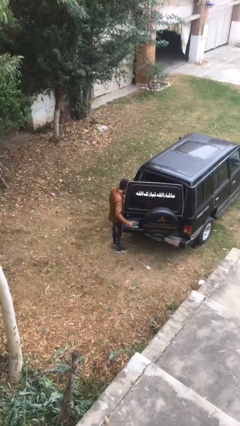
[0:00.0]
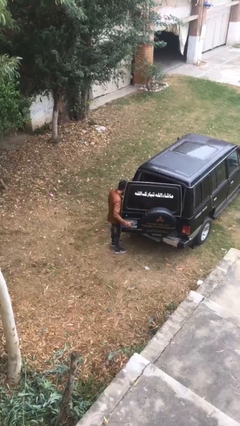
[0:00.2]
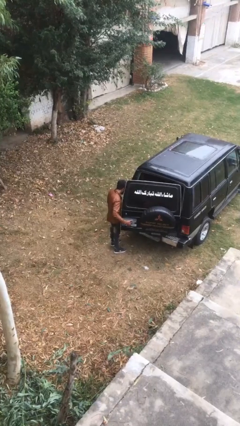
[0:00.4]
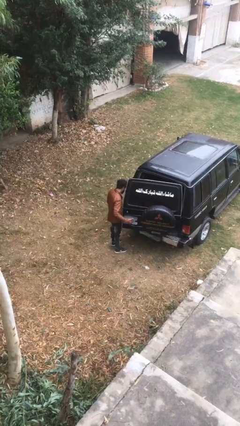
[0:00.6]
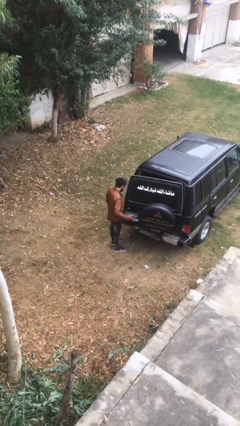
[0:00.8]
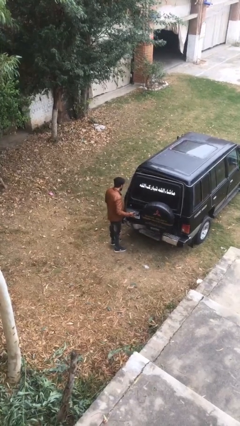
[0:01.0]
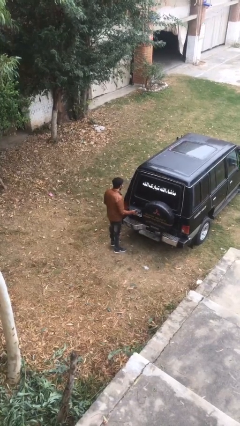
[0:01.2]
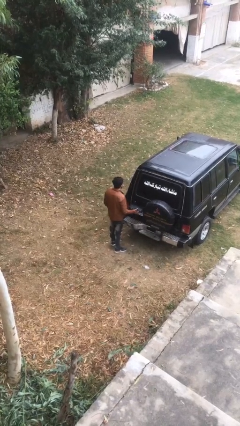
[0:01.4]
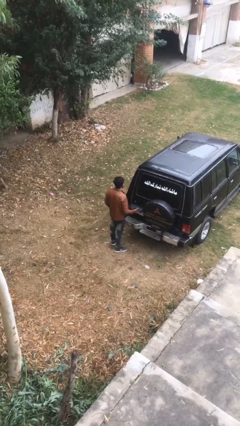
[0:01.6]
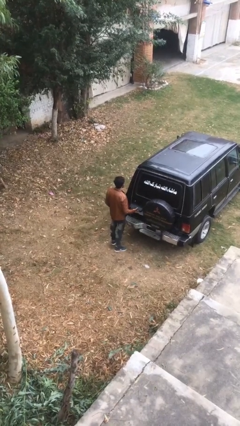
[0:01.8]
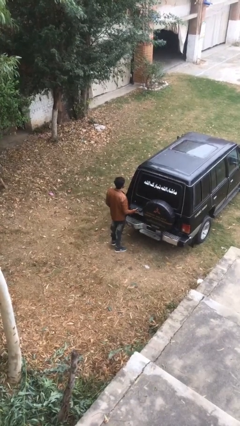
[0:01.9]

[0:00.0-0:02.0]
person closes car trunk

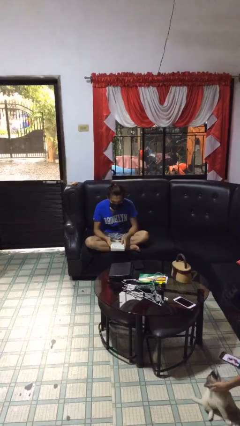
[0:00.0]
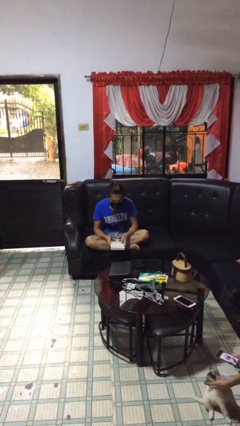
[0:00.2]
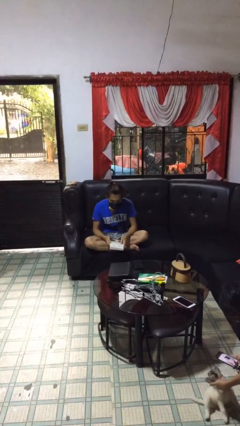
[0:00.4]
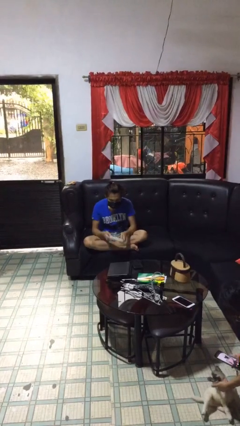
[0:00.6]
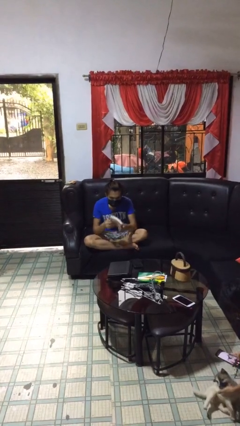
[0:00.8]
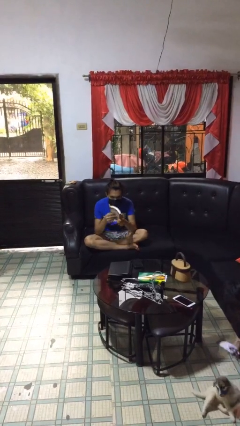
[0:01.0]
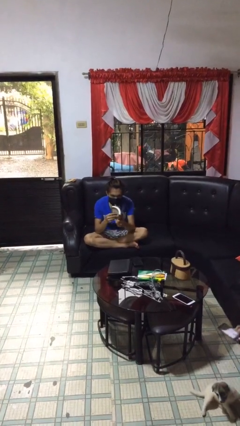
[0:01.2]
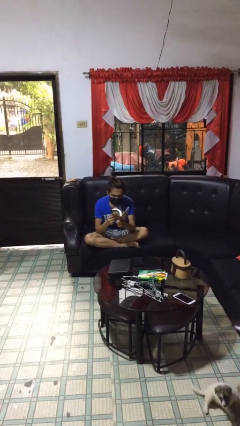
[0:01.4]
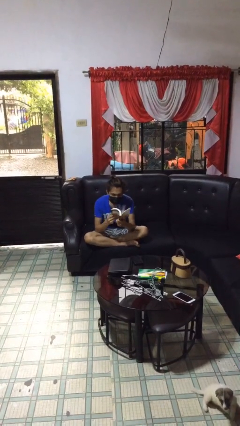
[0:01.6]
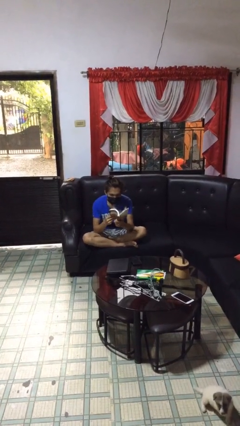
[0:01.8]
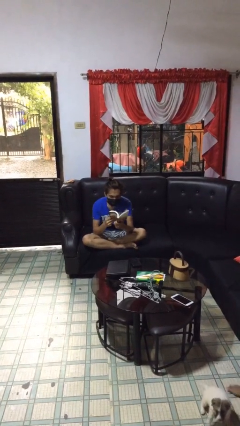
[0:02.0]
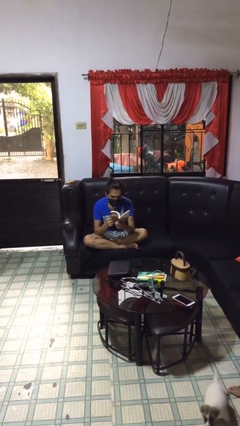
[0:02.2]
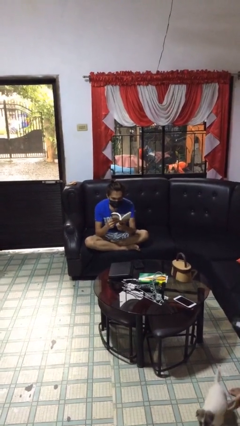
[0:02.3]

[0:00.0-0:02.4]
person reads document

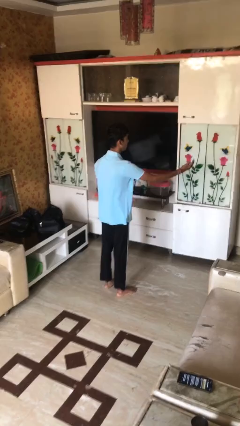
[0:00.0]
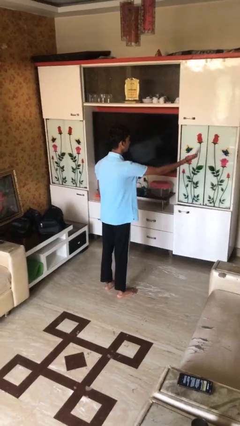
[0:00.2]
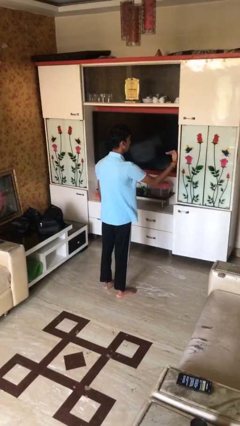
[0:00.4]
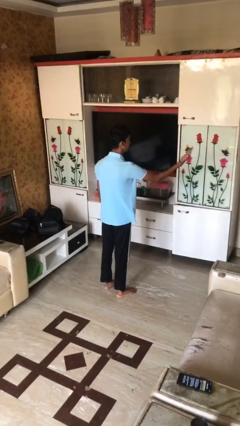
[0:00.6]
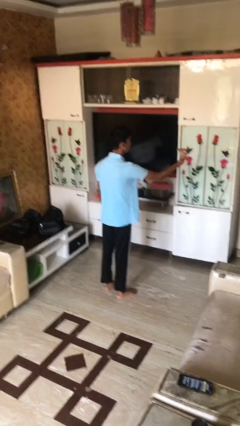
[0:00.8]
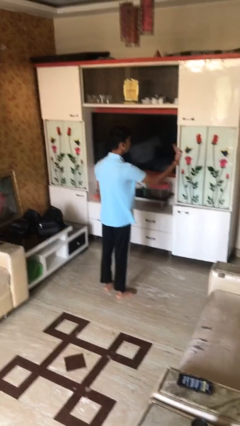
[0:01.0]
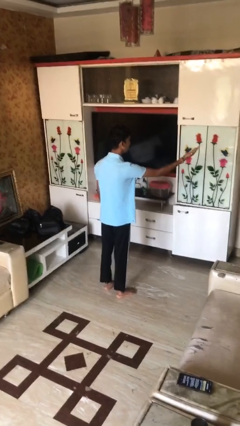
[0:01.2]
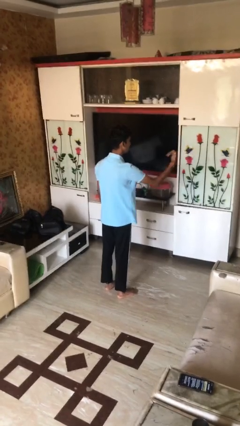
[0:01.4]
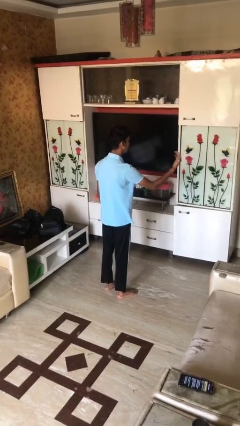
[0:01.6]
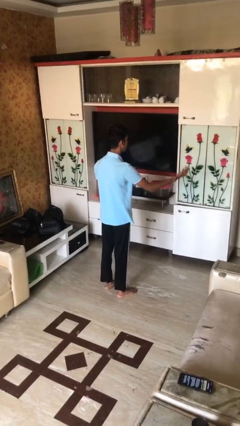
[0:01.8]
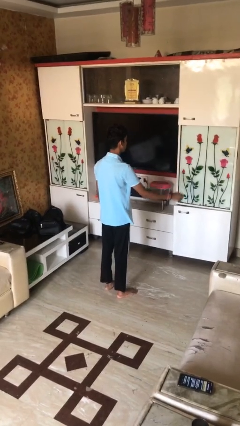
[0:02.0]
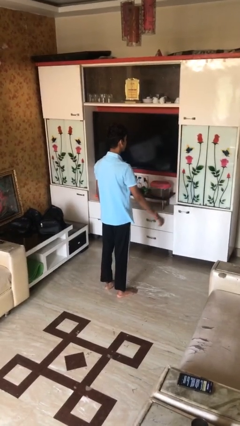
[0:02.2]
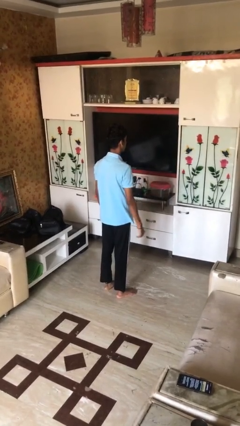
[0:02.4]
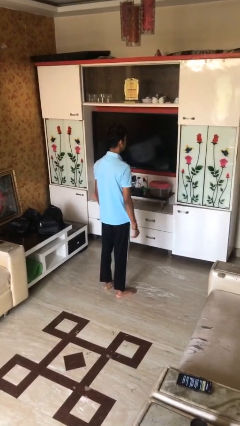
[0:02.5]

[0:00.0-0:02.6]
person gestures come here

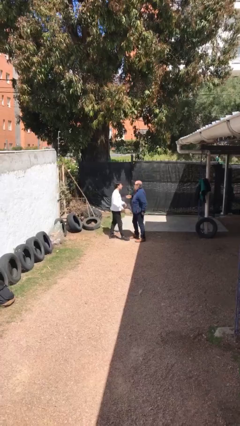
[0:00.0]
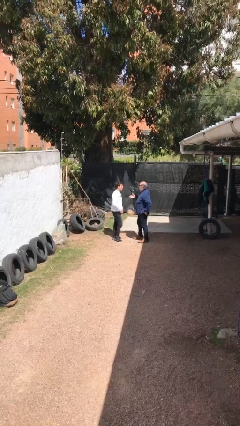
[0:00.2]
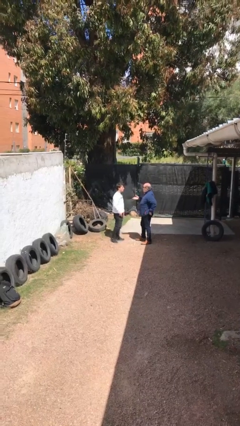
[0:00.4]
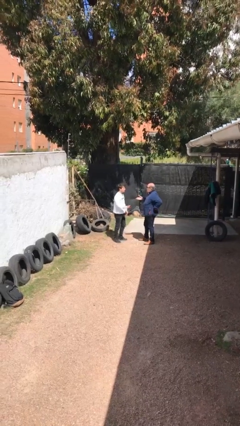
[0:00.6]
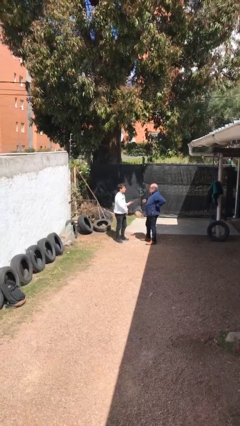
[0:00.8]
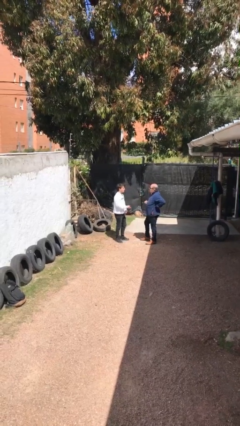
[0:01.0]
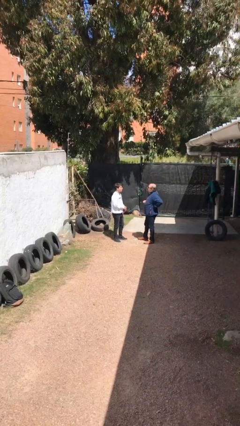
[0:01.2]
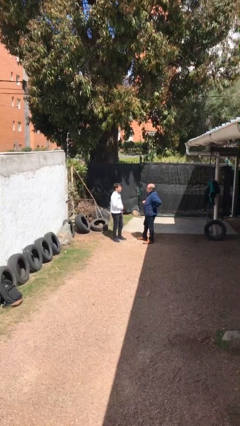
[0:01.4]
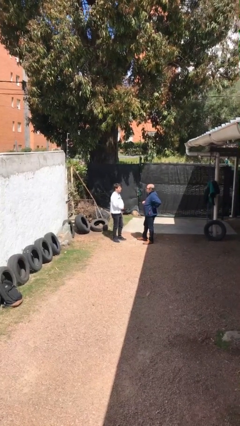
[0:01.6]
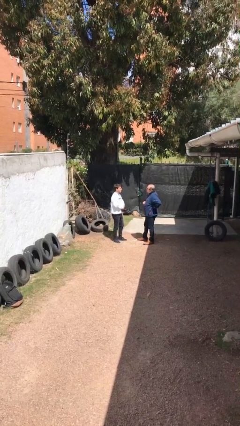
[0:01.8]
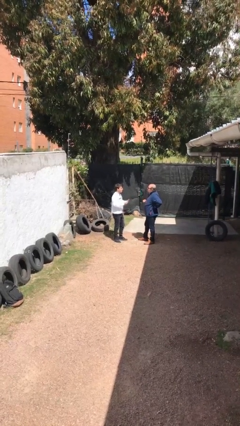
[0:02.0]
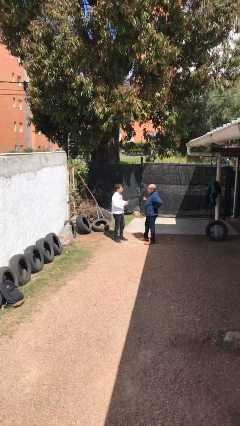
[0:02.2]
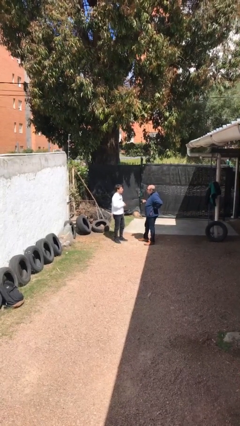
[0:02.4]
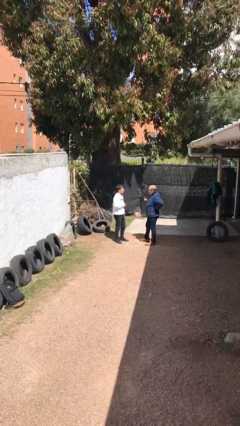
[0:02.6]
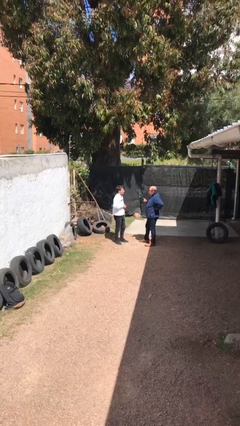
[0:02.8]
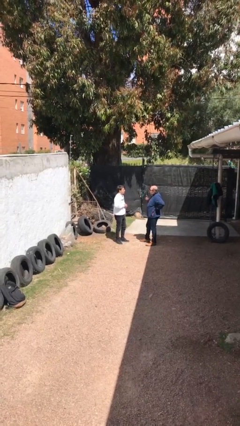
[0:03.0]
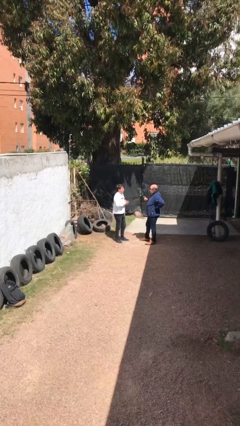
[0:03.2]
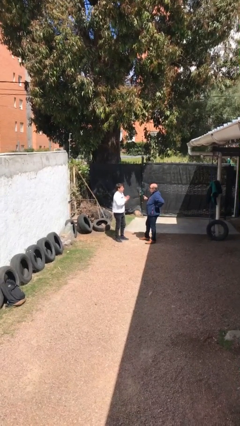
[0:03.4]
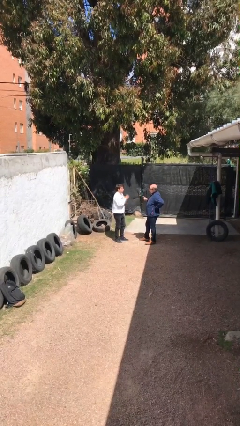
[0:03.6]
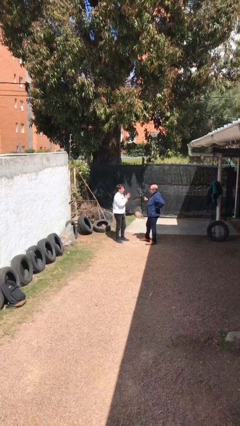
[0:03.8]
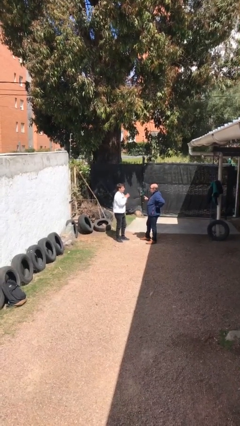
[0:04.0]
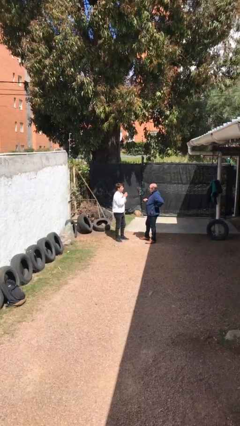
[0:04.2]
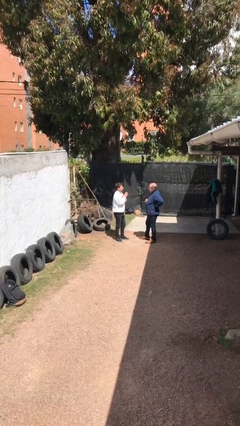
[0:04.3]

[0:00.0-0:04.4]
person talks to person

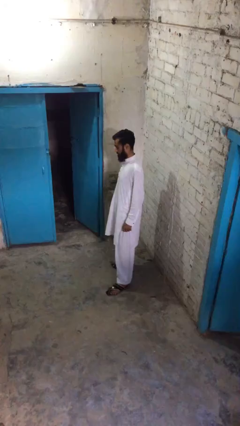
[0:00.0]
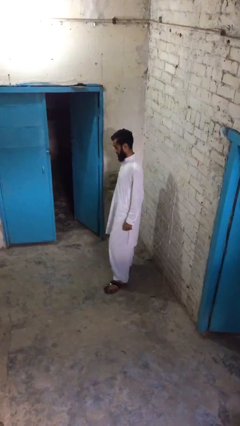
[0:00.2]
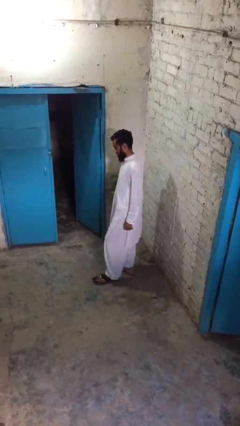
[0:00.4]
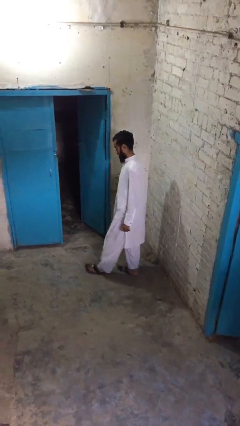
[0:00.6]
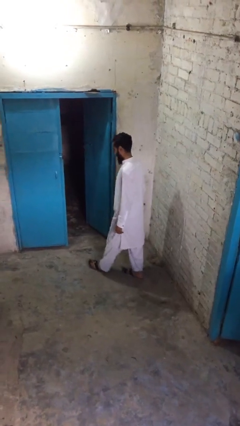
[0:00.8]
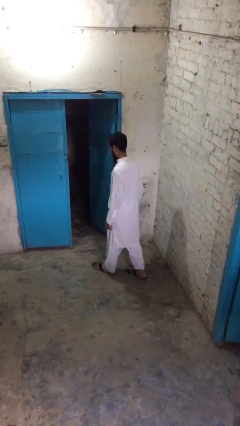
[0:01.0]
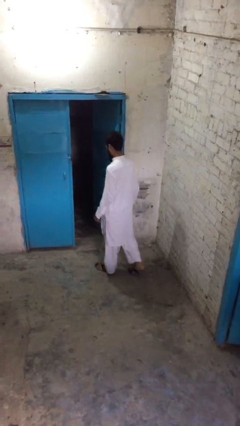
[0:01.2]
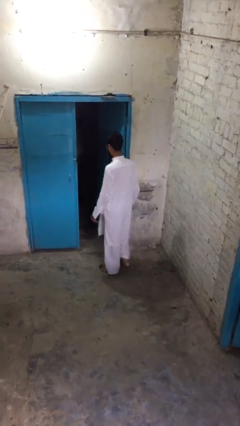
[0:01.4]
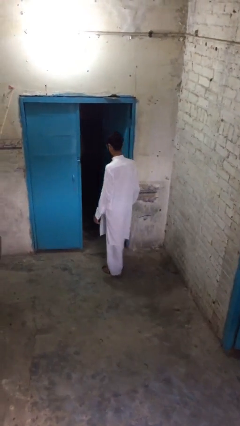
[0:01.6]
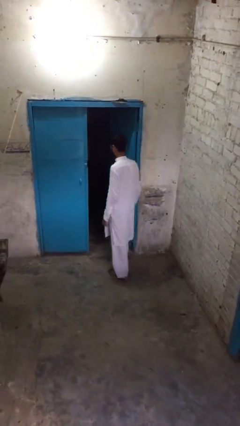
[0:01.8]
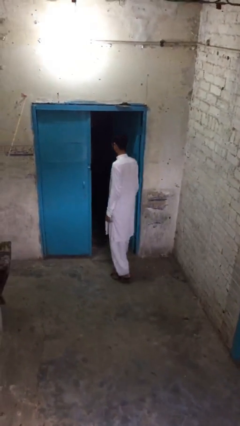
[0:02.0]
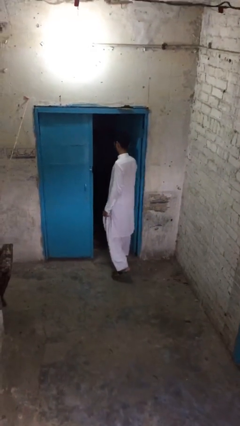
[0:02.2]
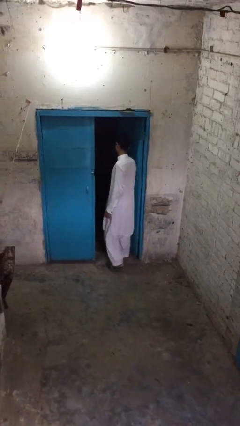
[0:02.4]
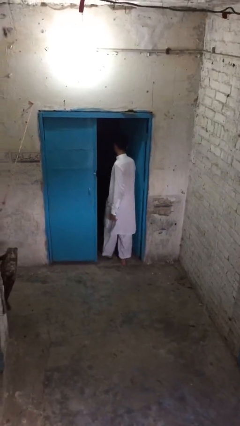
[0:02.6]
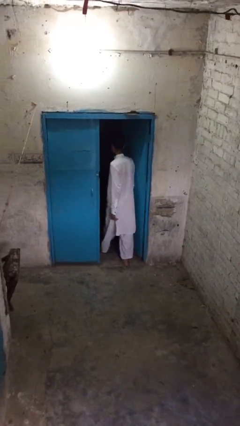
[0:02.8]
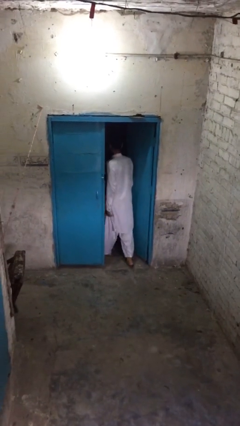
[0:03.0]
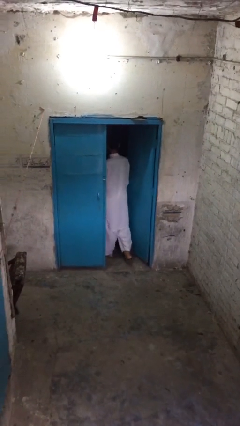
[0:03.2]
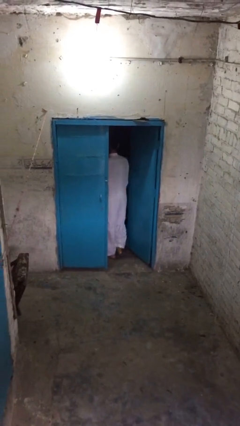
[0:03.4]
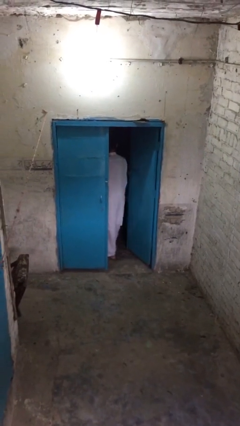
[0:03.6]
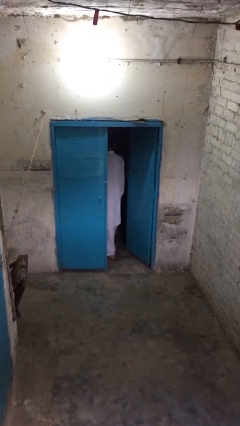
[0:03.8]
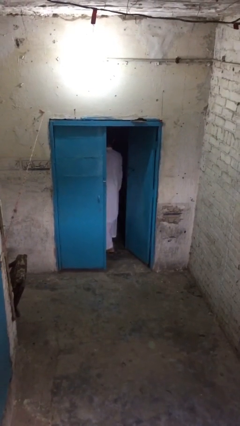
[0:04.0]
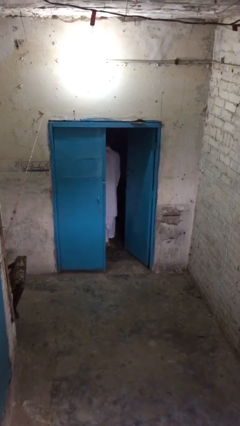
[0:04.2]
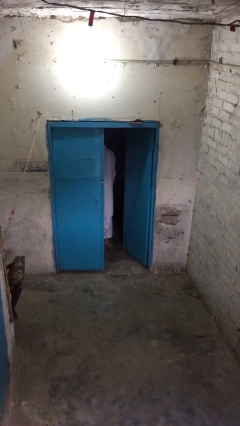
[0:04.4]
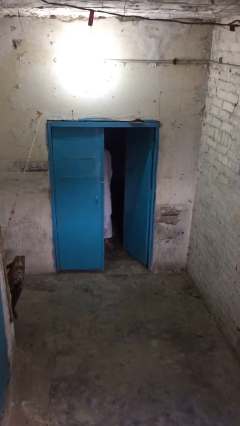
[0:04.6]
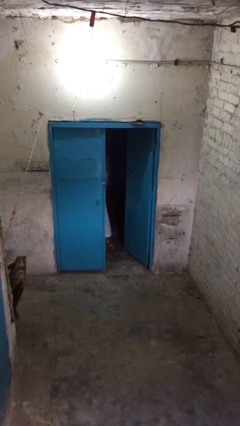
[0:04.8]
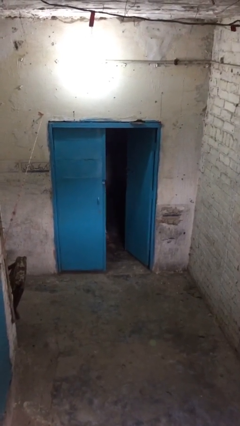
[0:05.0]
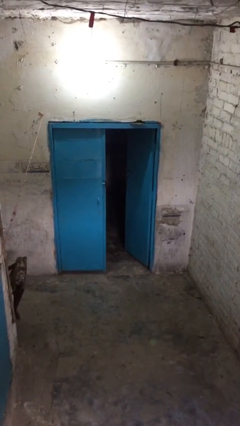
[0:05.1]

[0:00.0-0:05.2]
person exits scene through structure

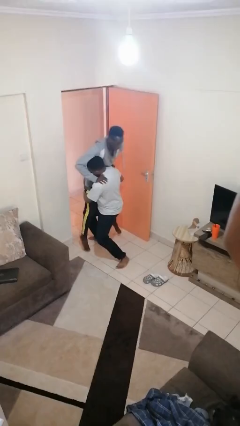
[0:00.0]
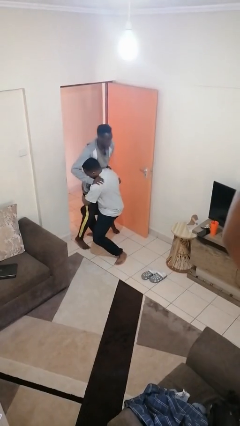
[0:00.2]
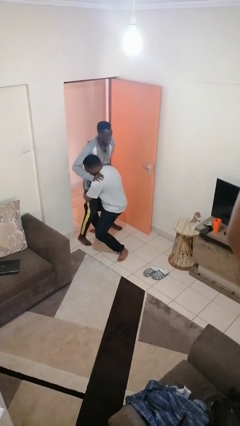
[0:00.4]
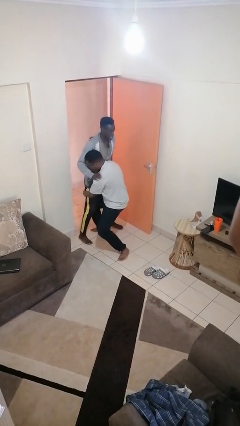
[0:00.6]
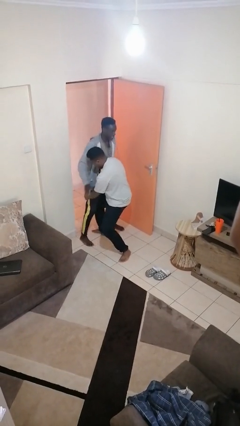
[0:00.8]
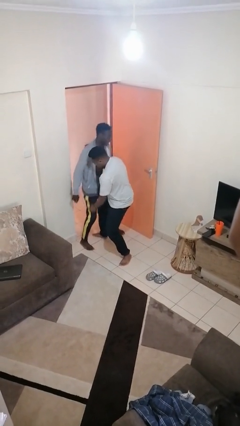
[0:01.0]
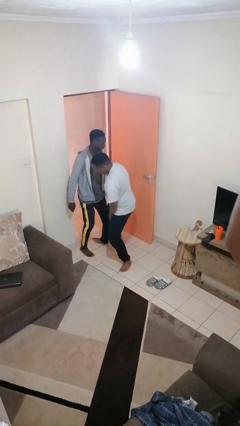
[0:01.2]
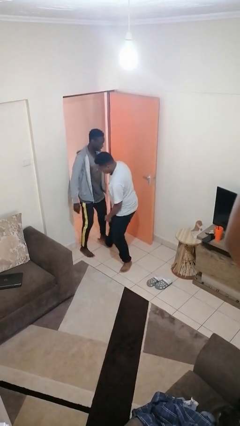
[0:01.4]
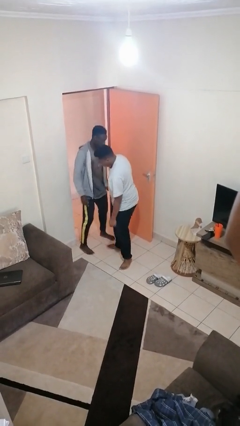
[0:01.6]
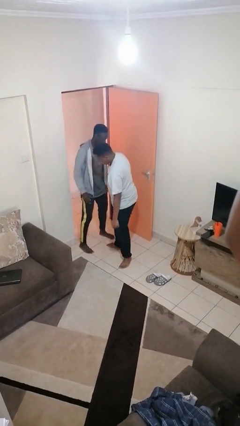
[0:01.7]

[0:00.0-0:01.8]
person puts down person
